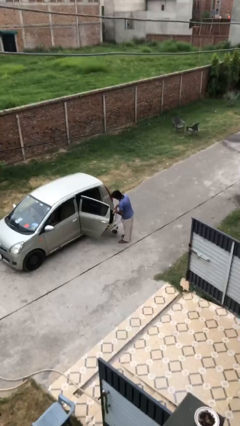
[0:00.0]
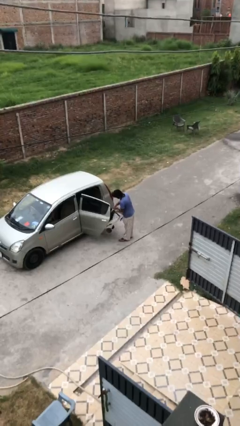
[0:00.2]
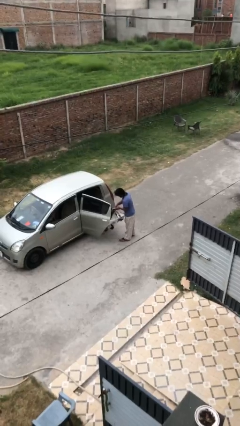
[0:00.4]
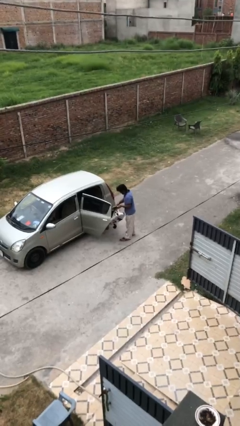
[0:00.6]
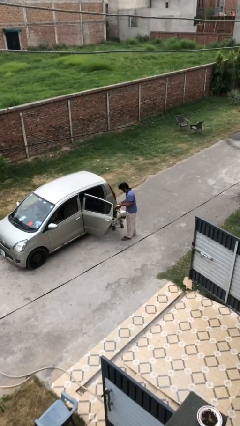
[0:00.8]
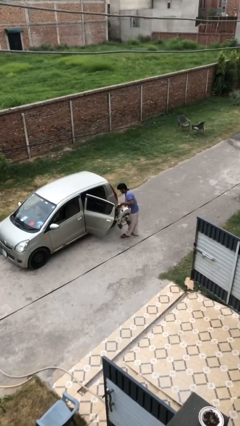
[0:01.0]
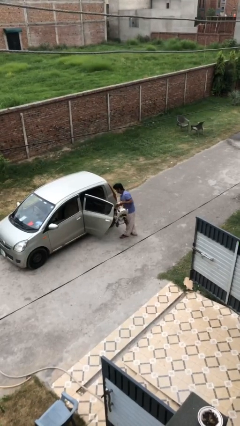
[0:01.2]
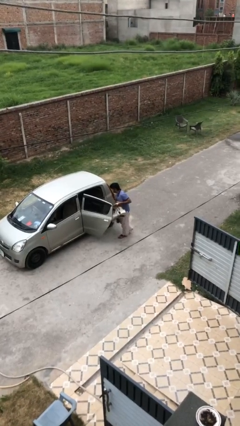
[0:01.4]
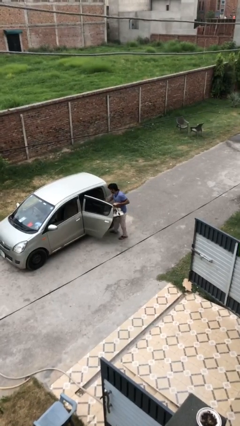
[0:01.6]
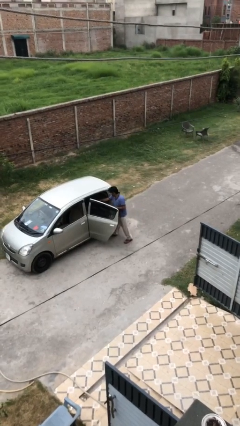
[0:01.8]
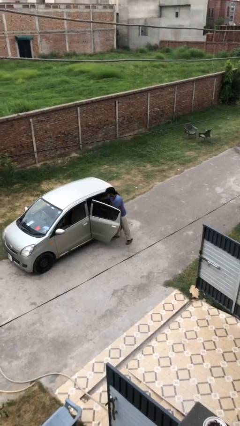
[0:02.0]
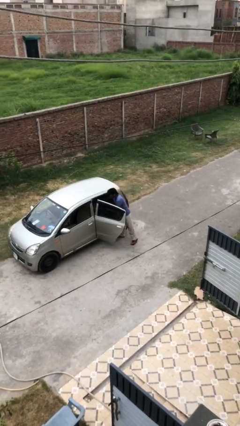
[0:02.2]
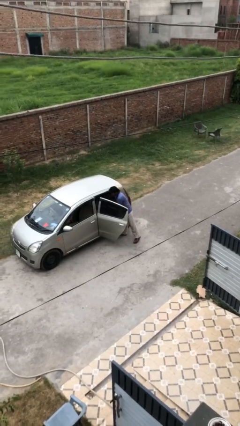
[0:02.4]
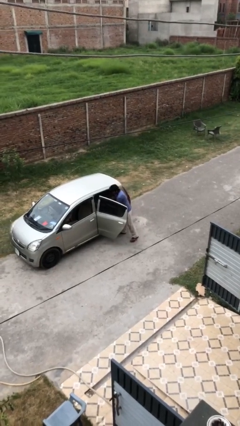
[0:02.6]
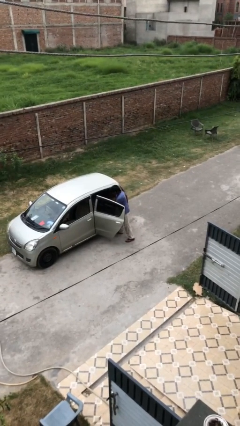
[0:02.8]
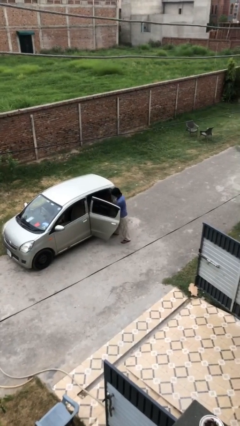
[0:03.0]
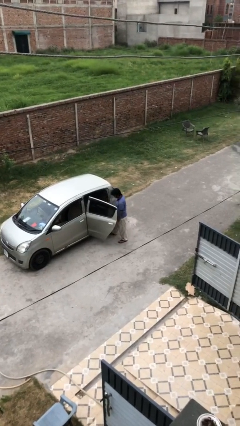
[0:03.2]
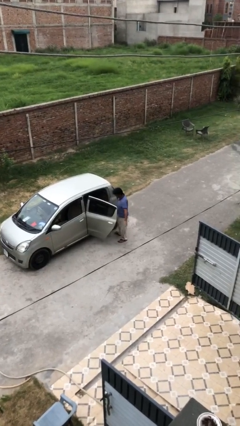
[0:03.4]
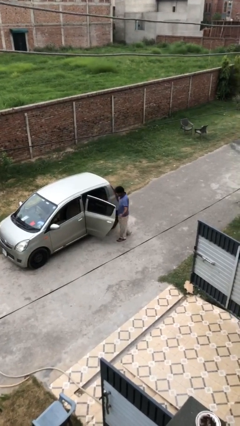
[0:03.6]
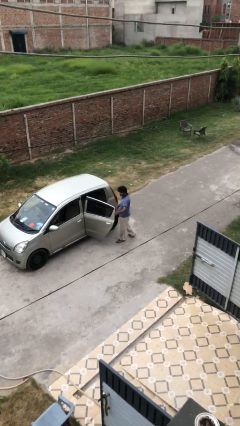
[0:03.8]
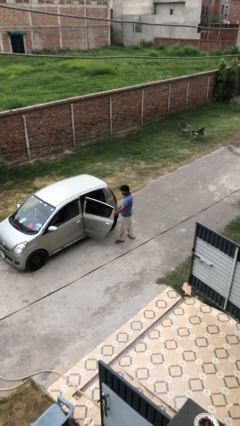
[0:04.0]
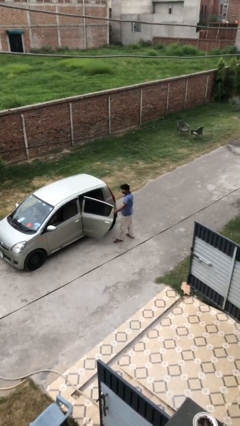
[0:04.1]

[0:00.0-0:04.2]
person loads car

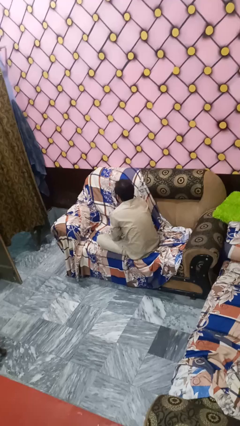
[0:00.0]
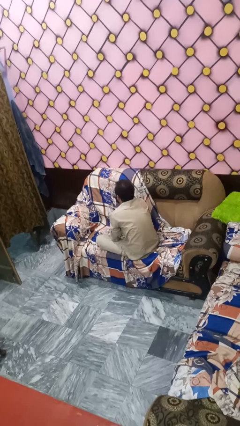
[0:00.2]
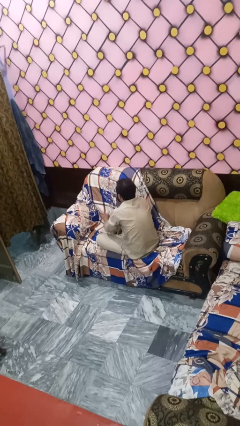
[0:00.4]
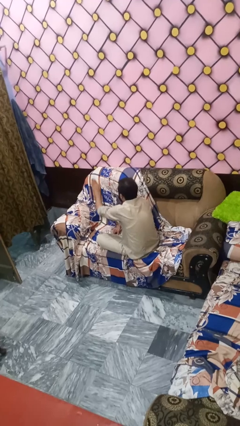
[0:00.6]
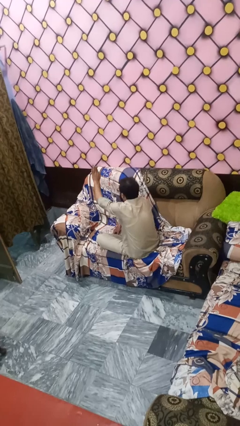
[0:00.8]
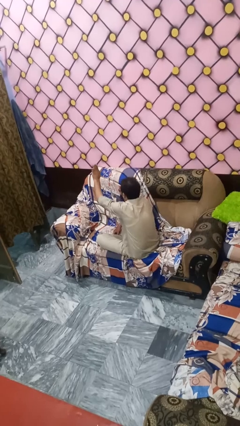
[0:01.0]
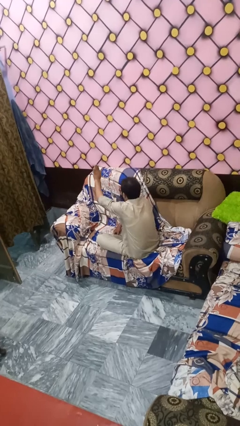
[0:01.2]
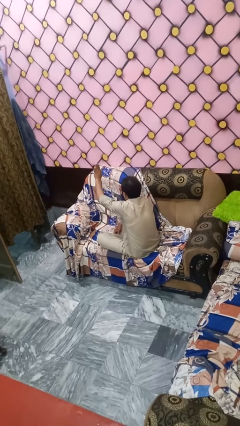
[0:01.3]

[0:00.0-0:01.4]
person gestures stop

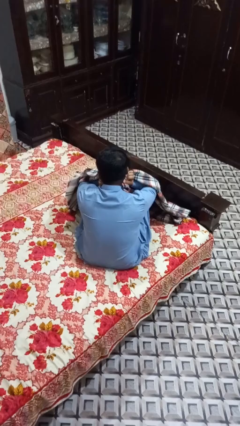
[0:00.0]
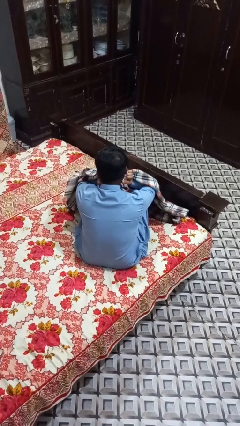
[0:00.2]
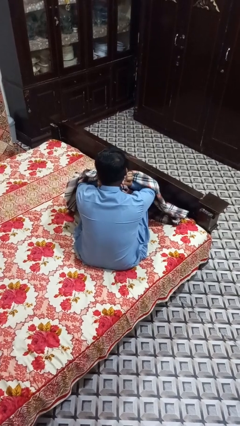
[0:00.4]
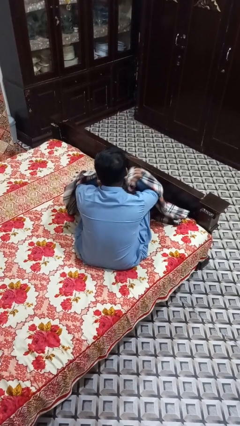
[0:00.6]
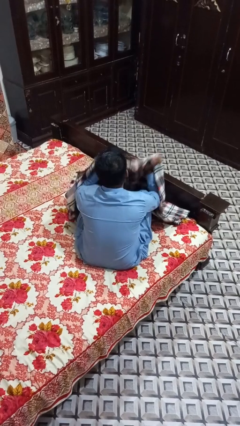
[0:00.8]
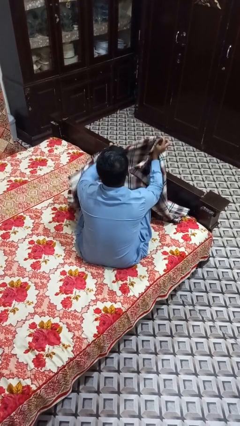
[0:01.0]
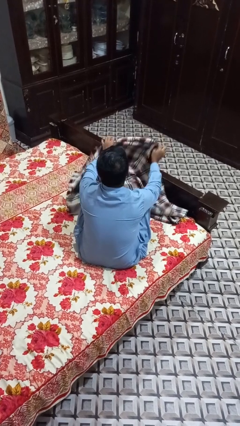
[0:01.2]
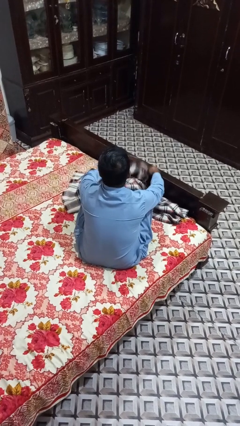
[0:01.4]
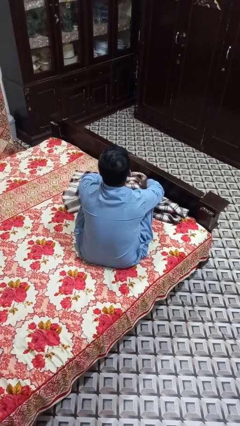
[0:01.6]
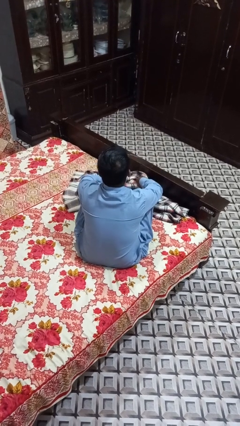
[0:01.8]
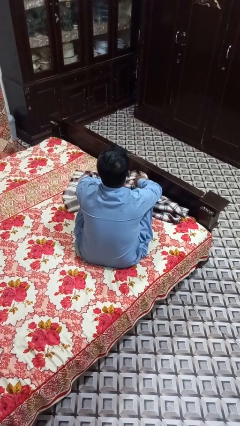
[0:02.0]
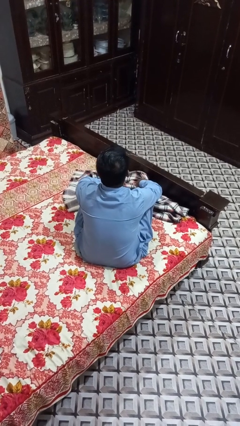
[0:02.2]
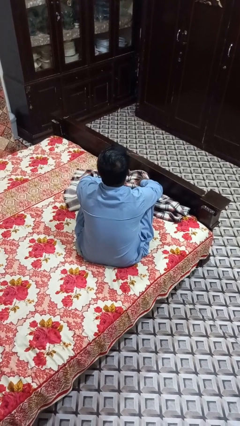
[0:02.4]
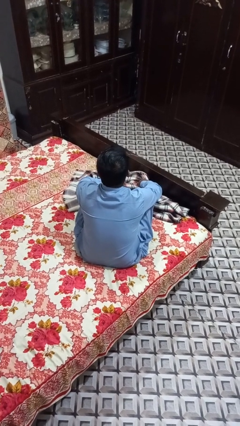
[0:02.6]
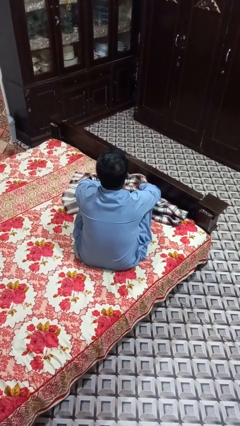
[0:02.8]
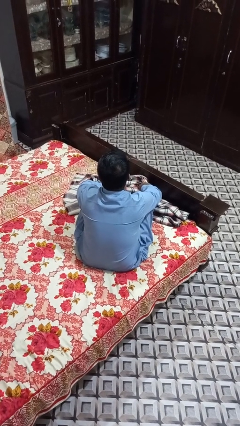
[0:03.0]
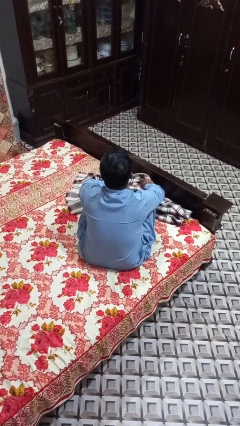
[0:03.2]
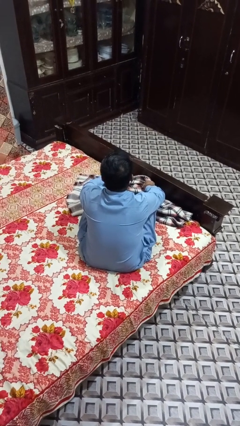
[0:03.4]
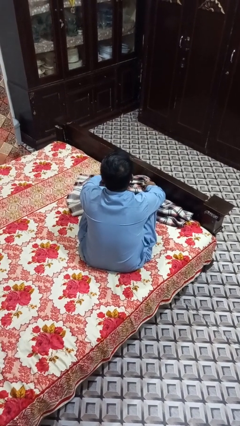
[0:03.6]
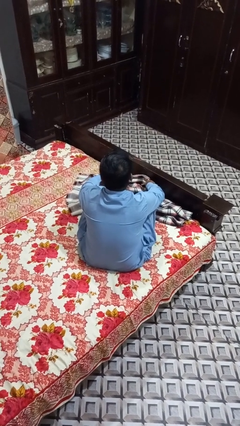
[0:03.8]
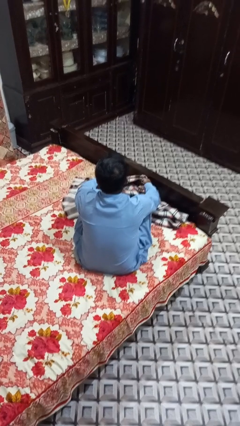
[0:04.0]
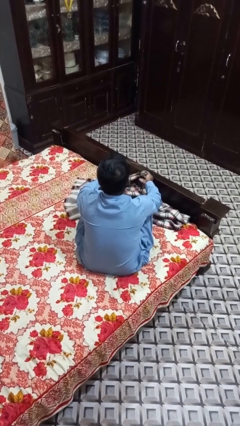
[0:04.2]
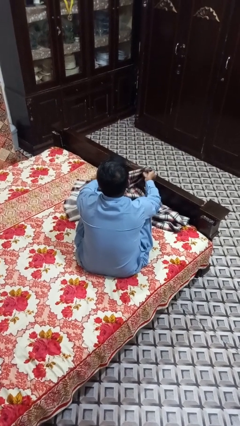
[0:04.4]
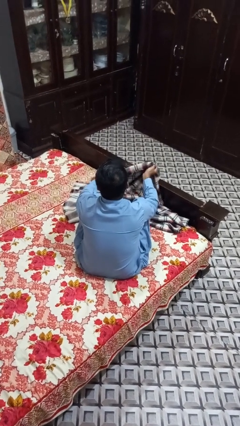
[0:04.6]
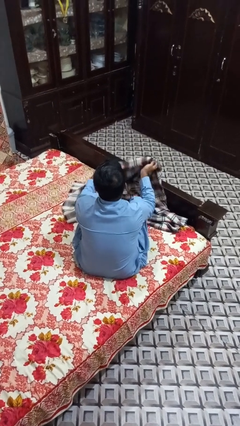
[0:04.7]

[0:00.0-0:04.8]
person uncovers with blanket

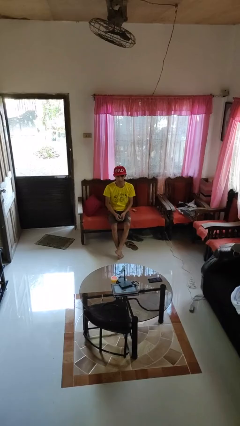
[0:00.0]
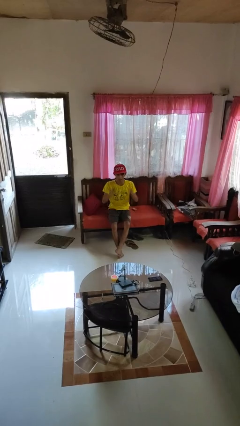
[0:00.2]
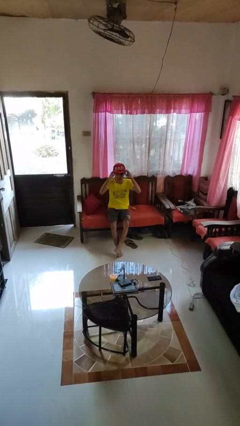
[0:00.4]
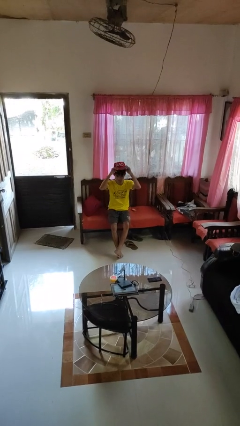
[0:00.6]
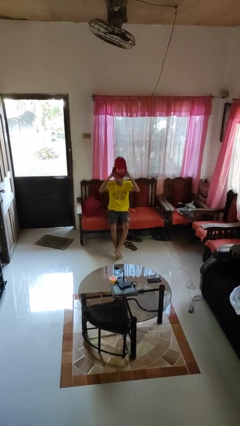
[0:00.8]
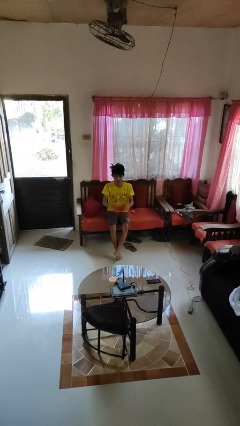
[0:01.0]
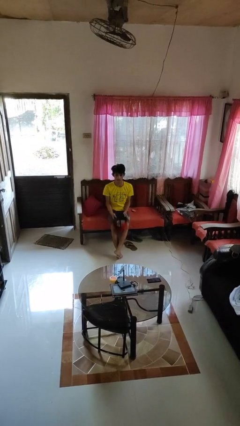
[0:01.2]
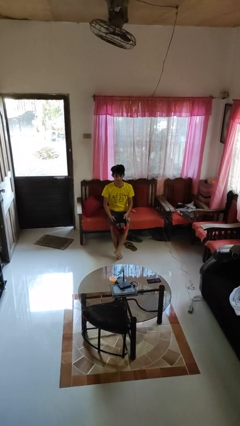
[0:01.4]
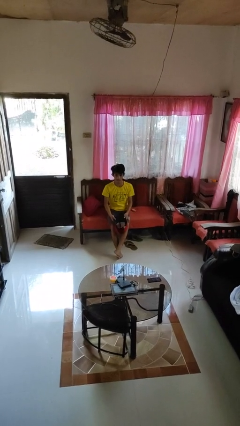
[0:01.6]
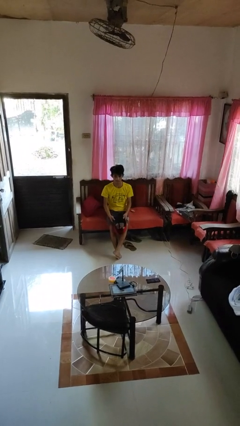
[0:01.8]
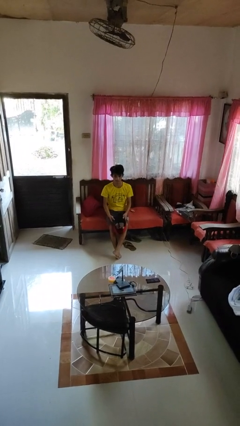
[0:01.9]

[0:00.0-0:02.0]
person takes off hat

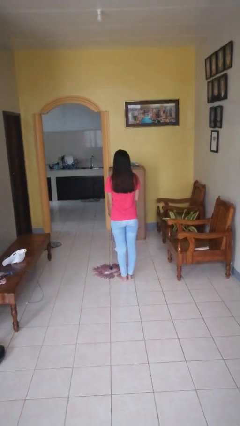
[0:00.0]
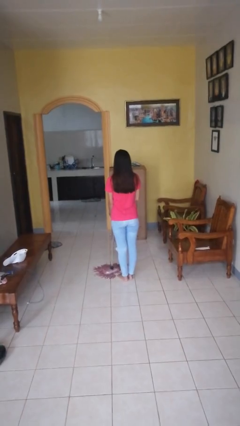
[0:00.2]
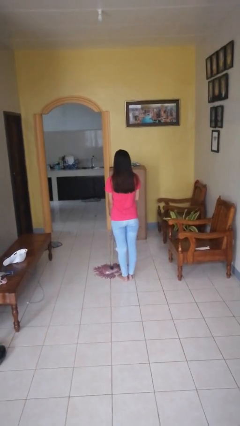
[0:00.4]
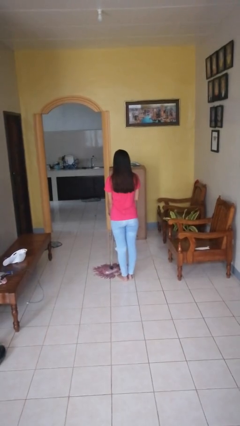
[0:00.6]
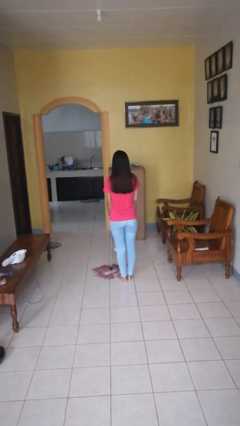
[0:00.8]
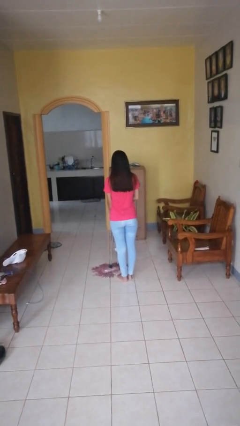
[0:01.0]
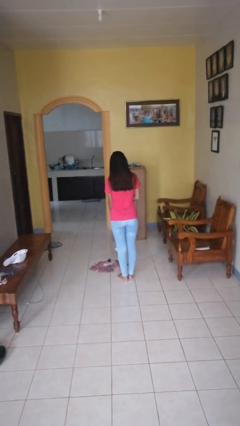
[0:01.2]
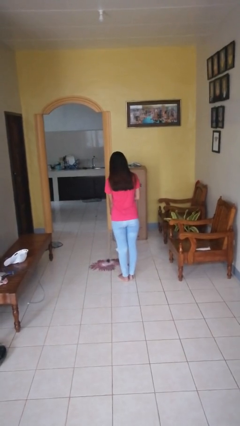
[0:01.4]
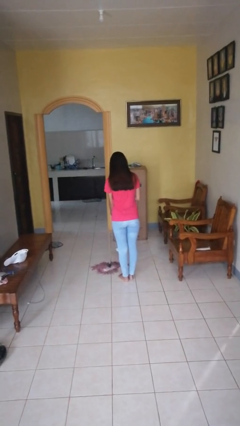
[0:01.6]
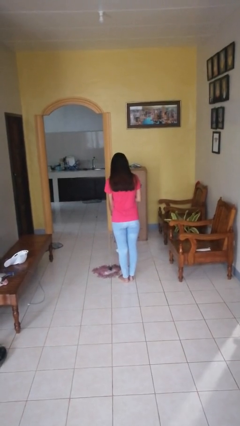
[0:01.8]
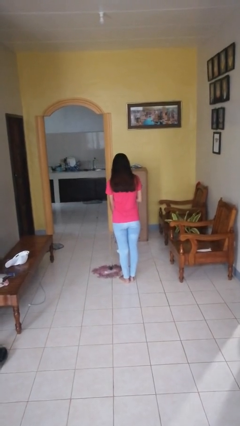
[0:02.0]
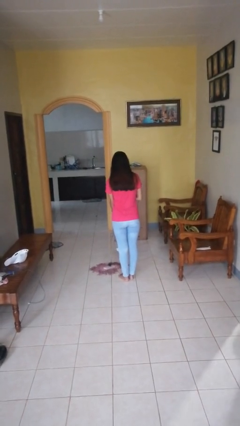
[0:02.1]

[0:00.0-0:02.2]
person mops

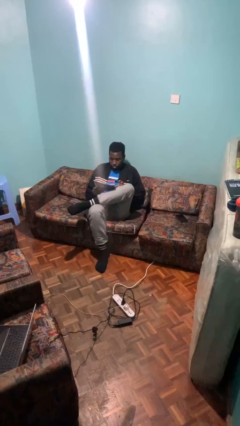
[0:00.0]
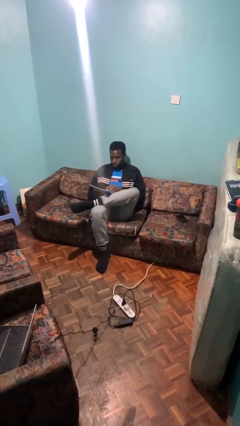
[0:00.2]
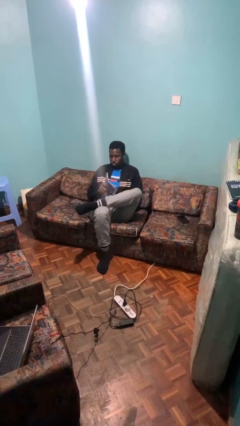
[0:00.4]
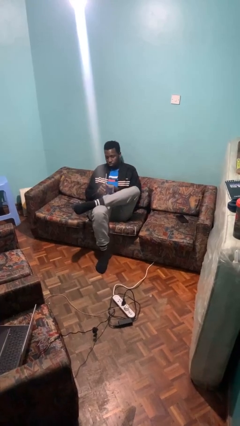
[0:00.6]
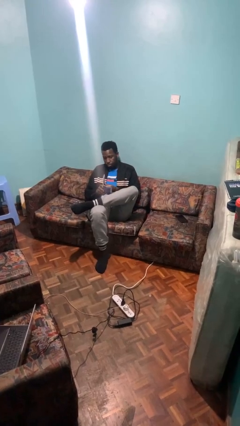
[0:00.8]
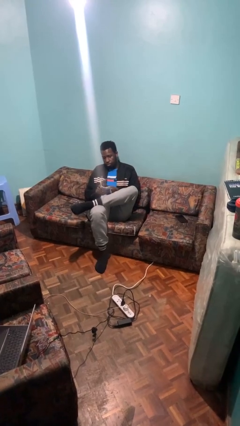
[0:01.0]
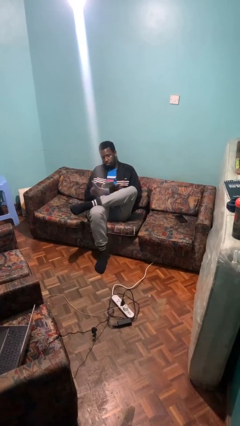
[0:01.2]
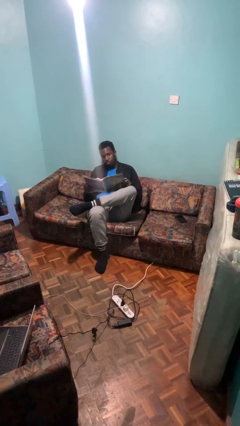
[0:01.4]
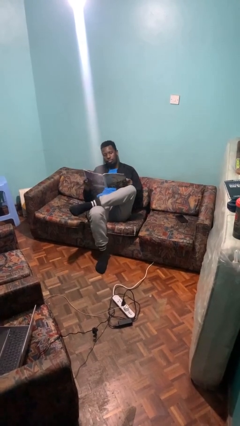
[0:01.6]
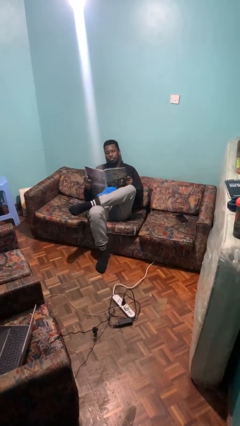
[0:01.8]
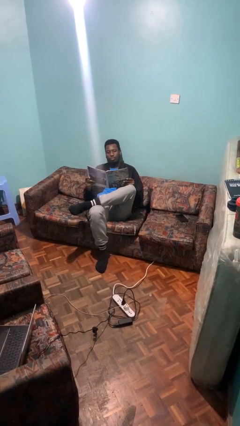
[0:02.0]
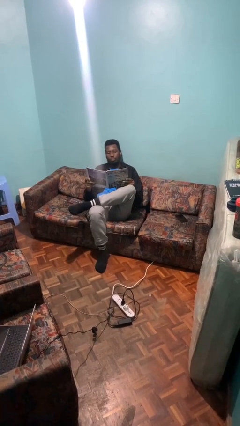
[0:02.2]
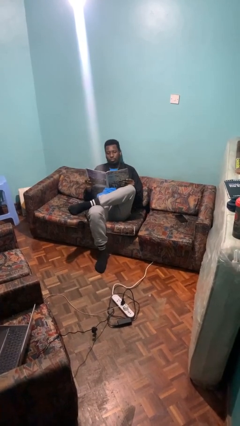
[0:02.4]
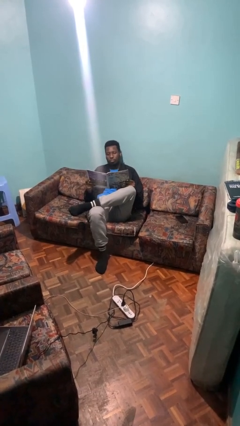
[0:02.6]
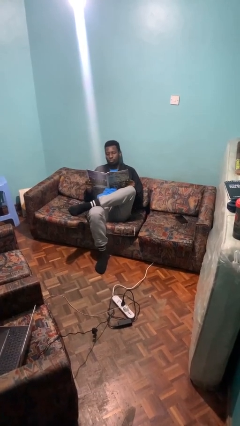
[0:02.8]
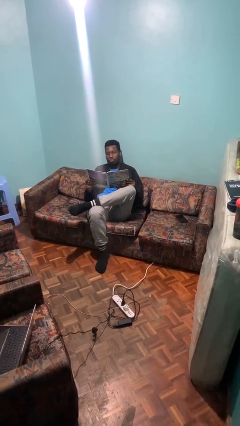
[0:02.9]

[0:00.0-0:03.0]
person reads magazine

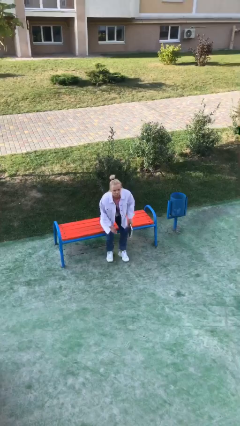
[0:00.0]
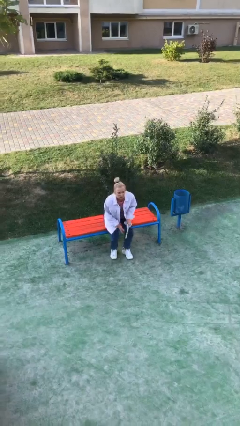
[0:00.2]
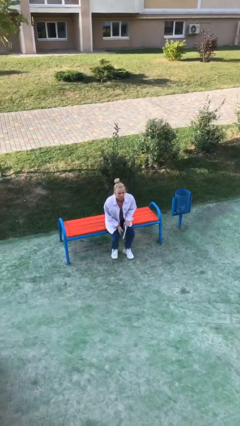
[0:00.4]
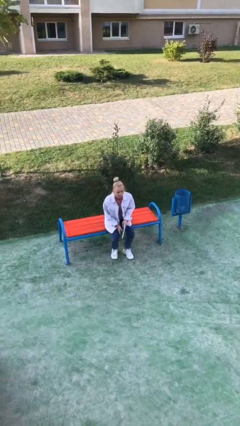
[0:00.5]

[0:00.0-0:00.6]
person sits down
